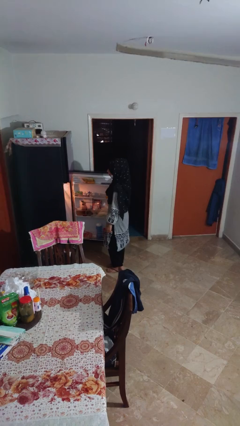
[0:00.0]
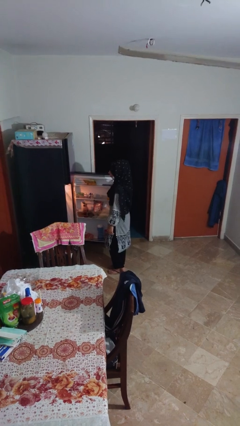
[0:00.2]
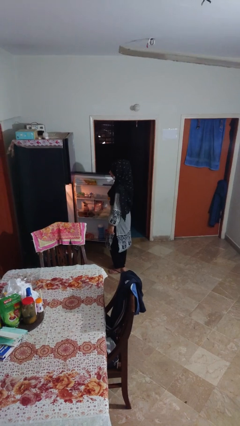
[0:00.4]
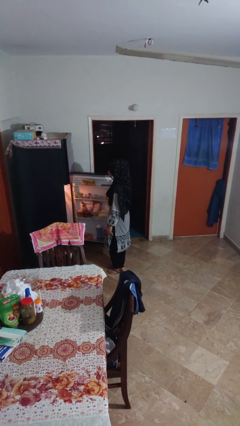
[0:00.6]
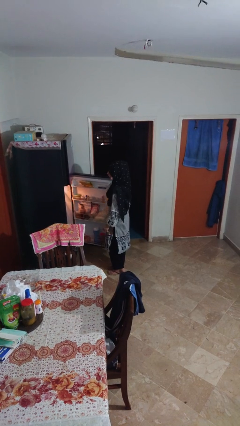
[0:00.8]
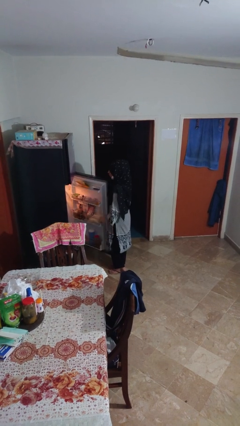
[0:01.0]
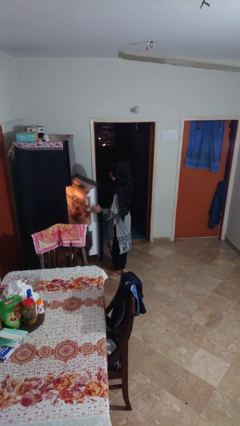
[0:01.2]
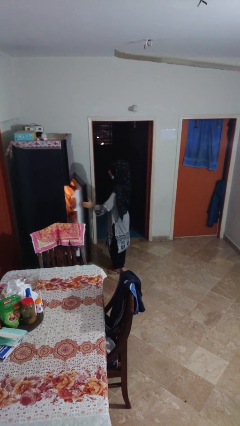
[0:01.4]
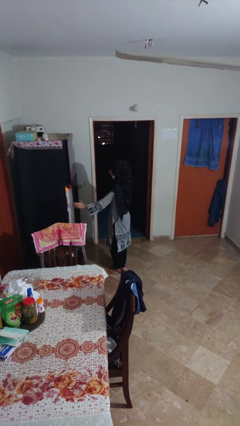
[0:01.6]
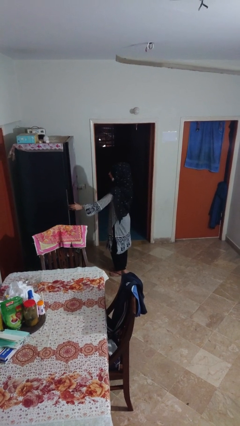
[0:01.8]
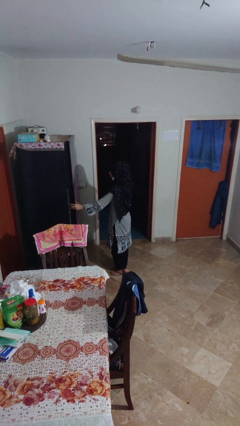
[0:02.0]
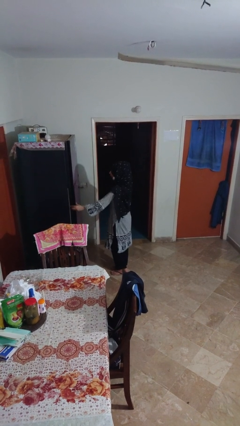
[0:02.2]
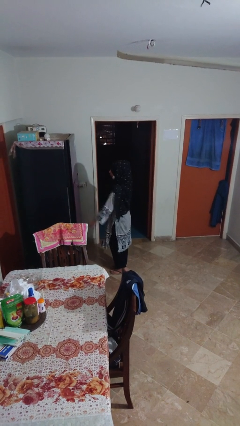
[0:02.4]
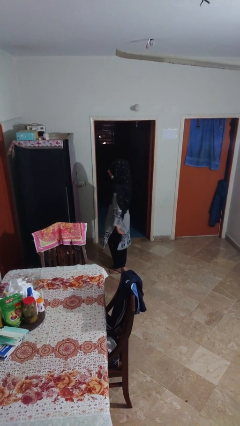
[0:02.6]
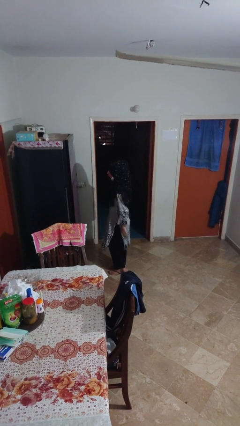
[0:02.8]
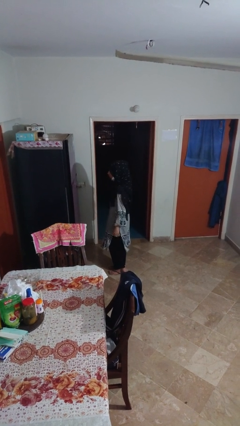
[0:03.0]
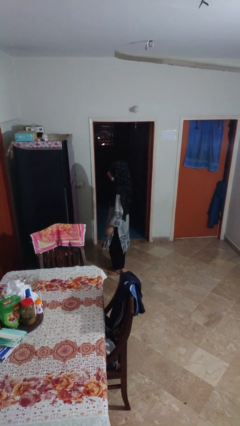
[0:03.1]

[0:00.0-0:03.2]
person closes refrigerator

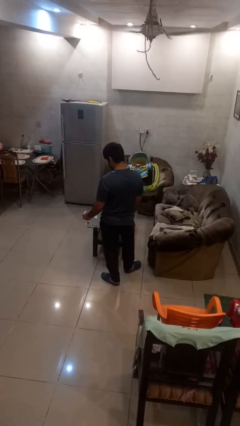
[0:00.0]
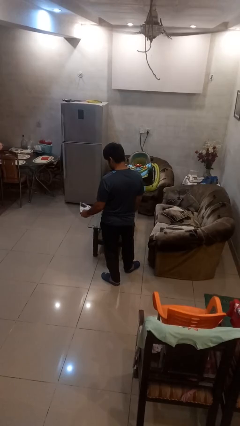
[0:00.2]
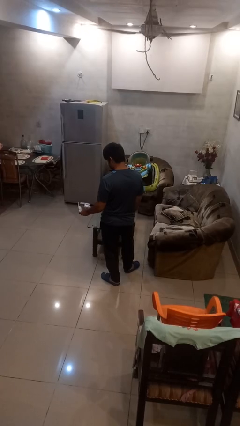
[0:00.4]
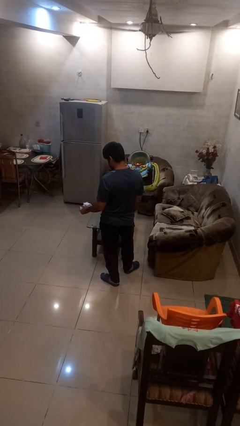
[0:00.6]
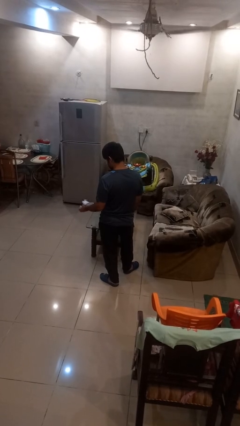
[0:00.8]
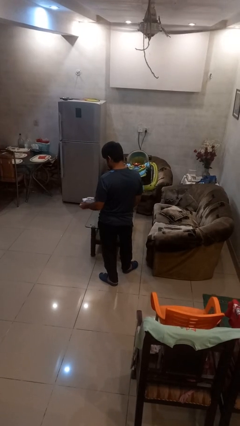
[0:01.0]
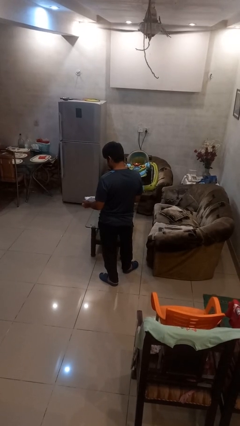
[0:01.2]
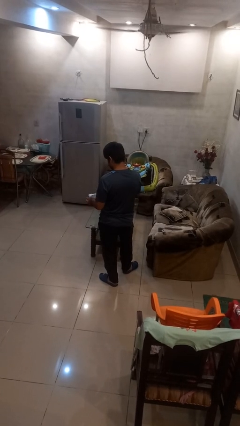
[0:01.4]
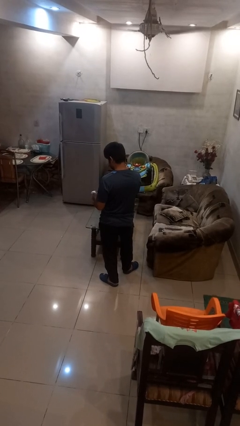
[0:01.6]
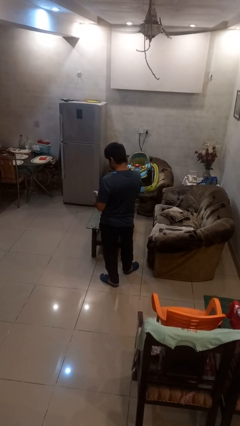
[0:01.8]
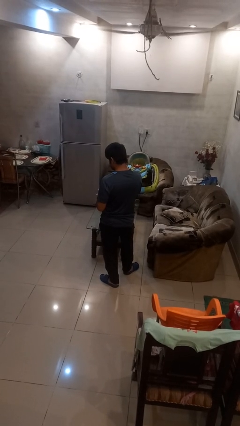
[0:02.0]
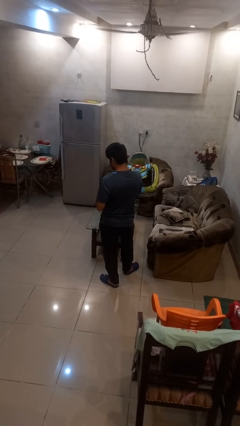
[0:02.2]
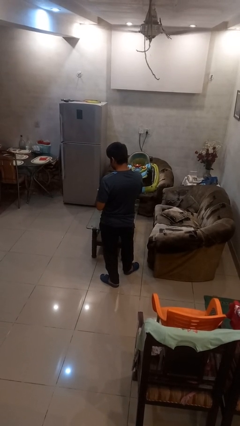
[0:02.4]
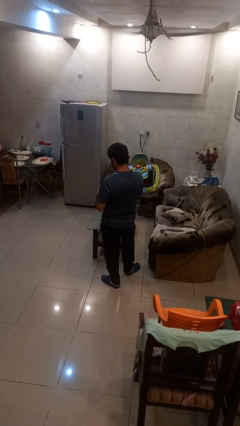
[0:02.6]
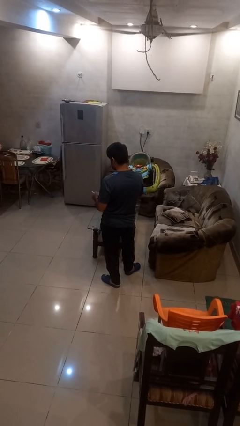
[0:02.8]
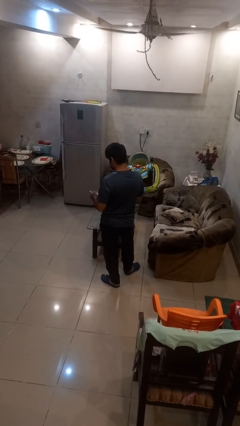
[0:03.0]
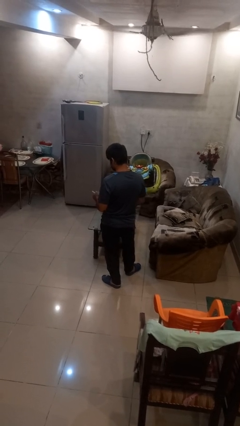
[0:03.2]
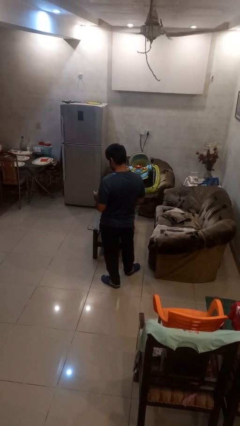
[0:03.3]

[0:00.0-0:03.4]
person crumples paper

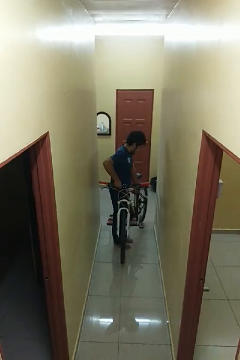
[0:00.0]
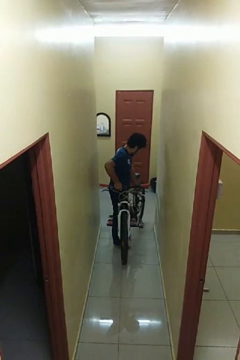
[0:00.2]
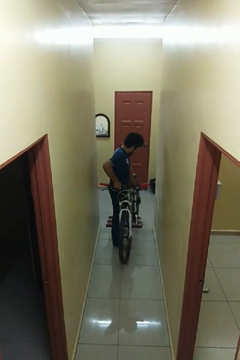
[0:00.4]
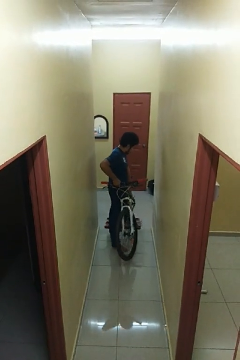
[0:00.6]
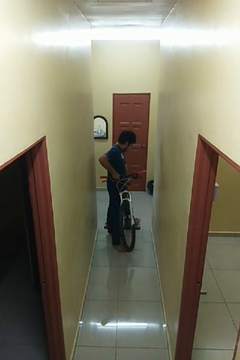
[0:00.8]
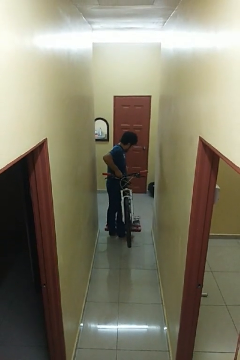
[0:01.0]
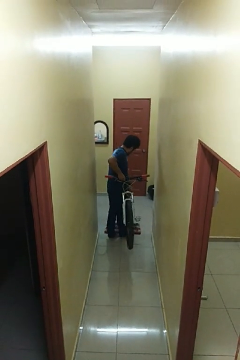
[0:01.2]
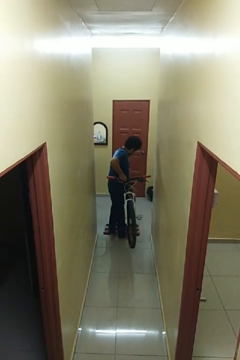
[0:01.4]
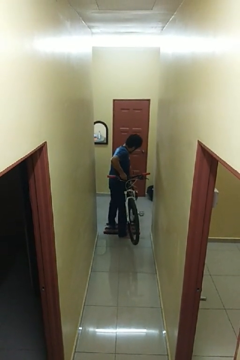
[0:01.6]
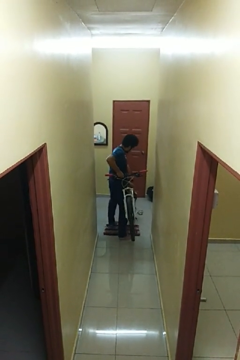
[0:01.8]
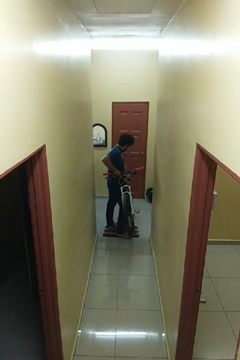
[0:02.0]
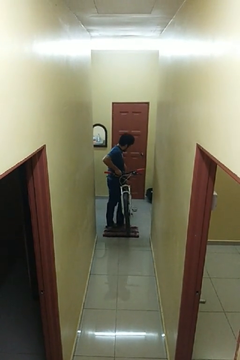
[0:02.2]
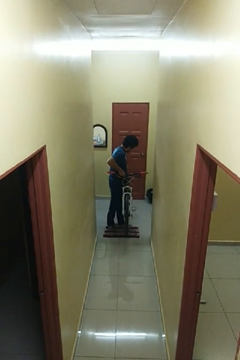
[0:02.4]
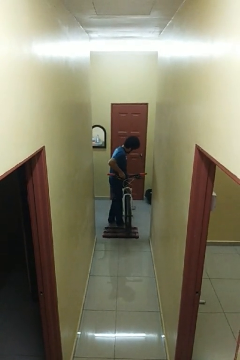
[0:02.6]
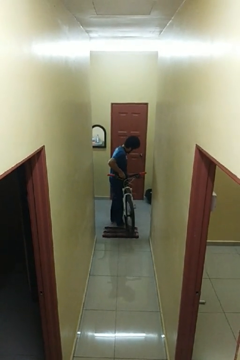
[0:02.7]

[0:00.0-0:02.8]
person carries bicycle

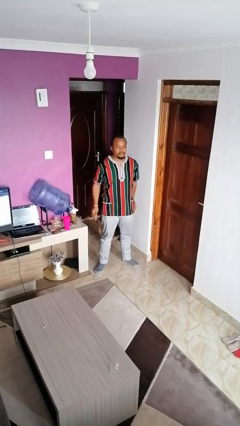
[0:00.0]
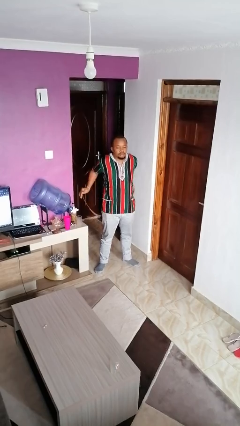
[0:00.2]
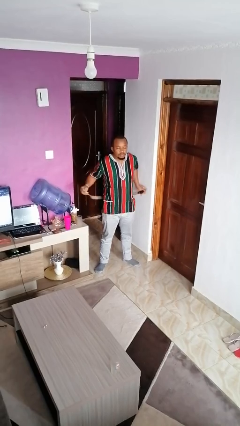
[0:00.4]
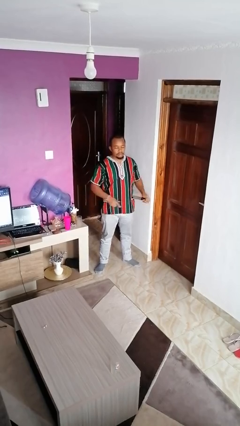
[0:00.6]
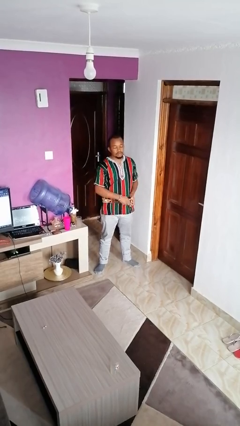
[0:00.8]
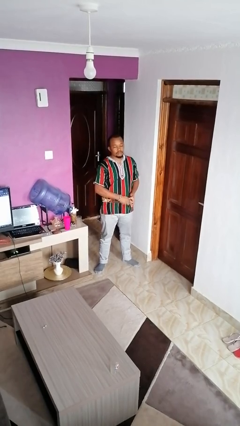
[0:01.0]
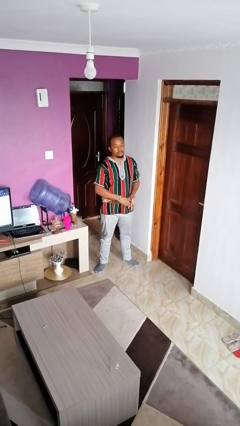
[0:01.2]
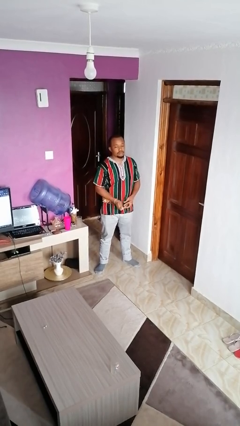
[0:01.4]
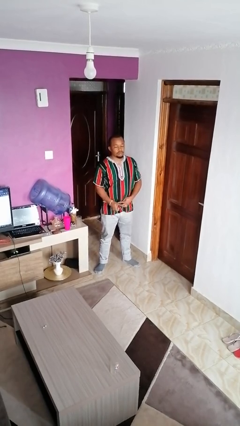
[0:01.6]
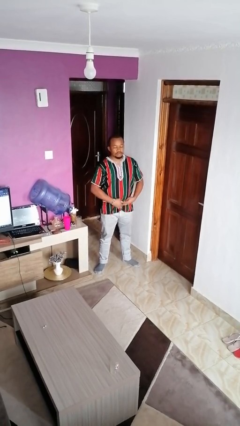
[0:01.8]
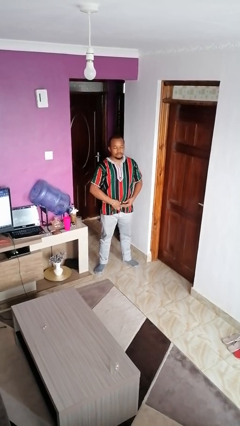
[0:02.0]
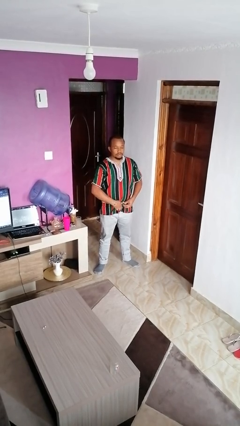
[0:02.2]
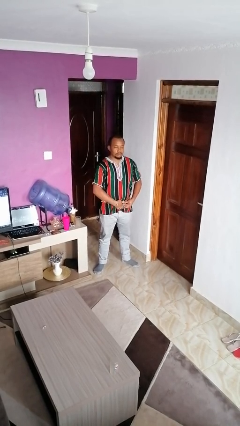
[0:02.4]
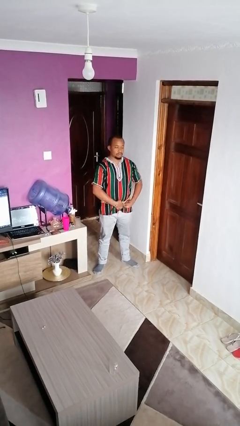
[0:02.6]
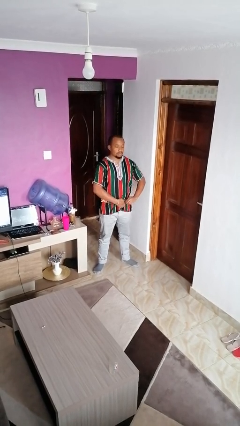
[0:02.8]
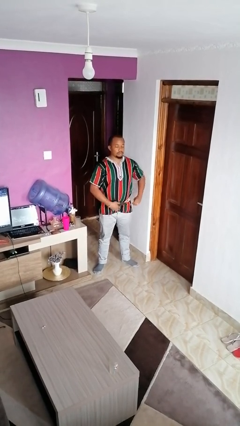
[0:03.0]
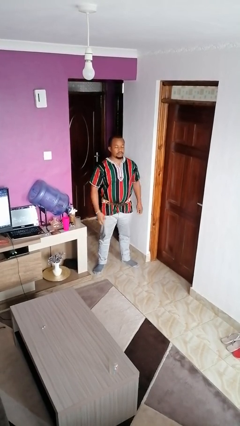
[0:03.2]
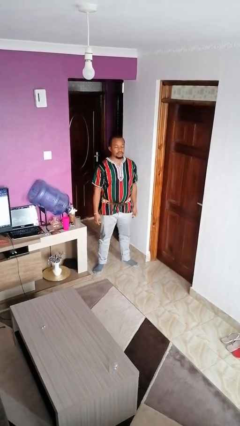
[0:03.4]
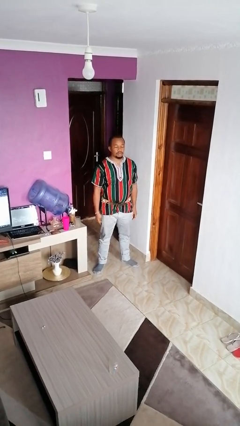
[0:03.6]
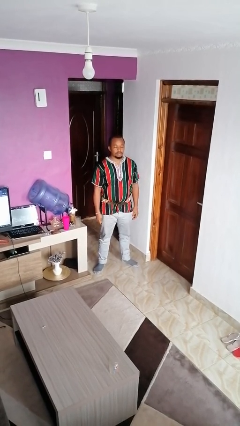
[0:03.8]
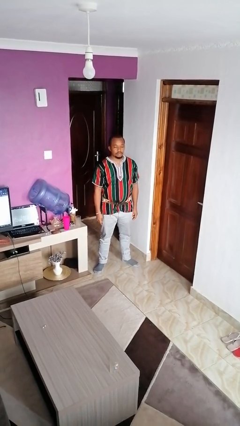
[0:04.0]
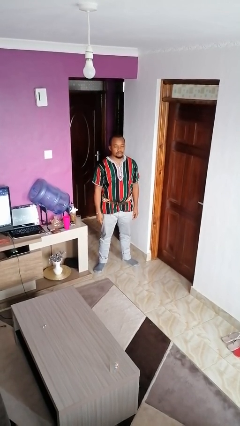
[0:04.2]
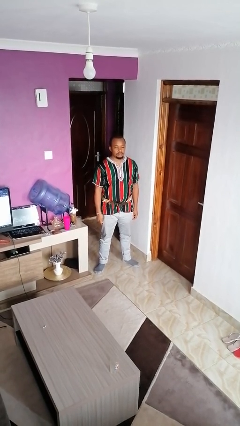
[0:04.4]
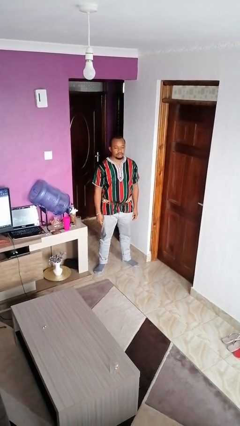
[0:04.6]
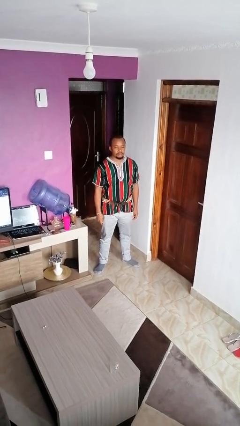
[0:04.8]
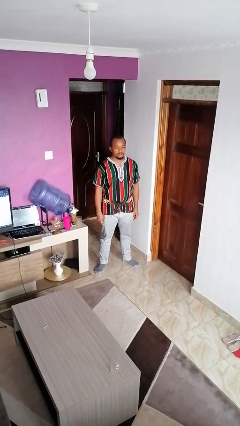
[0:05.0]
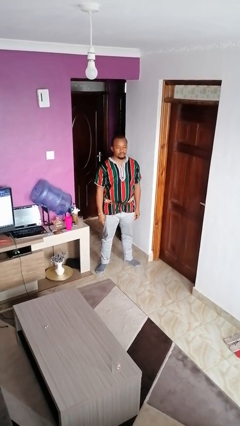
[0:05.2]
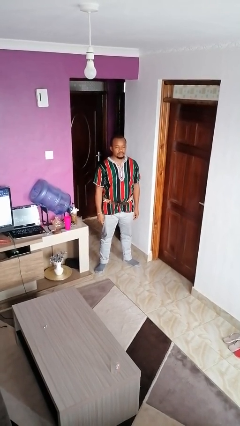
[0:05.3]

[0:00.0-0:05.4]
person puts on belt

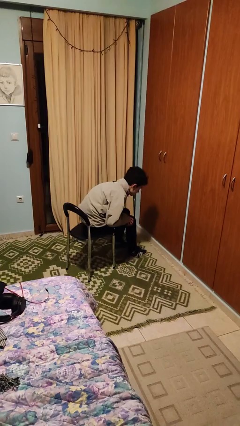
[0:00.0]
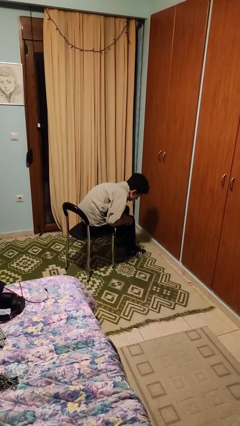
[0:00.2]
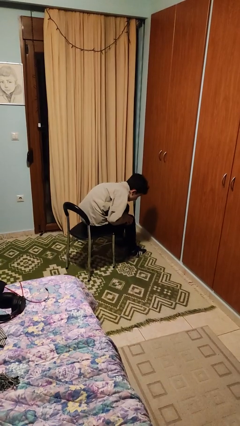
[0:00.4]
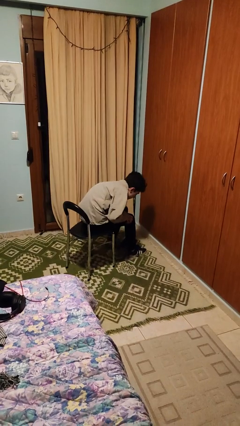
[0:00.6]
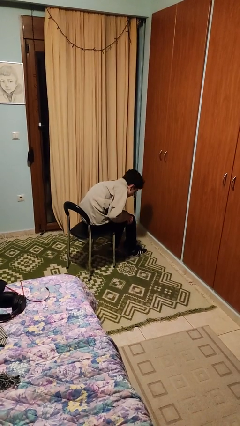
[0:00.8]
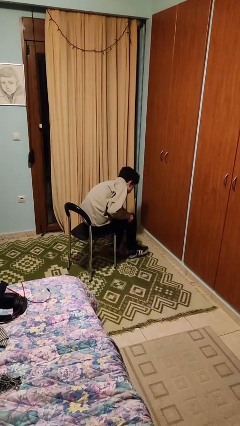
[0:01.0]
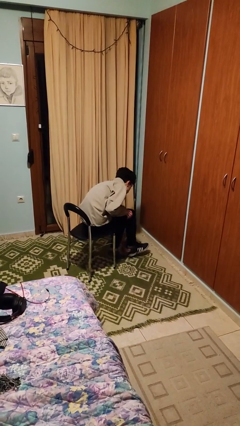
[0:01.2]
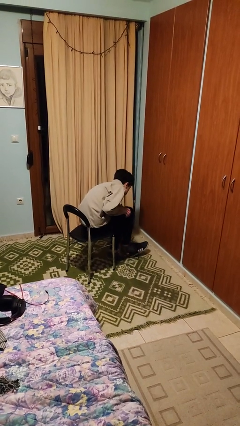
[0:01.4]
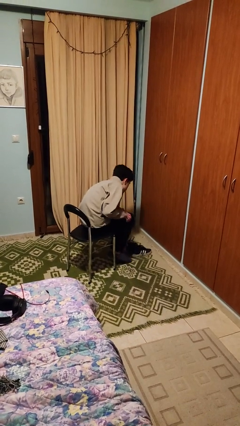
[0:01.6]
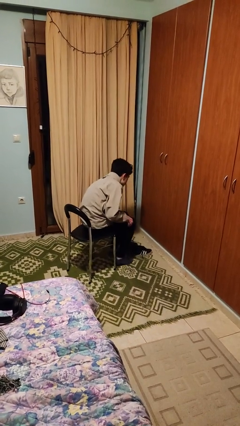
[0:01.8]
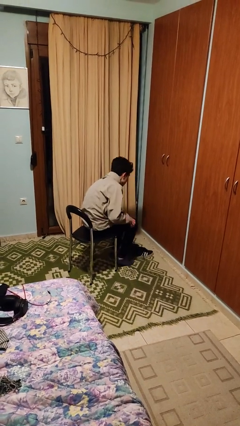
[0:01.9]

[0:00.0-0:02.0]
person takes off shoes

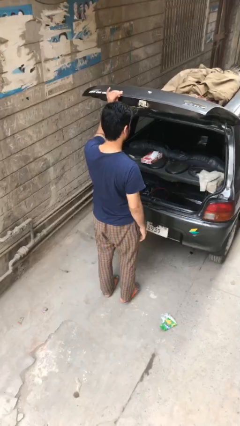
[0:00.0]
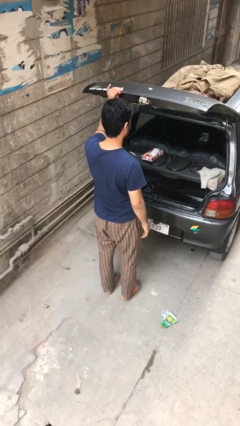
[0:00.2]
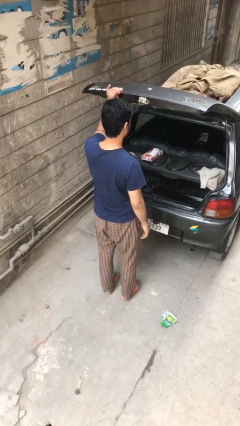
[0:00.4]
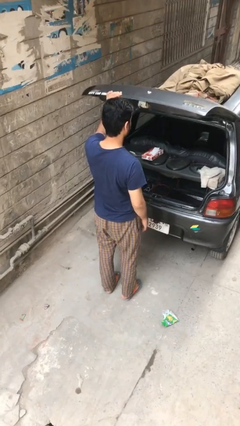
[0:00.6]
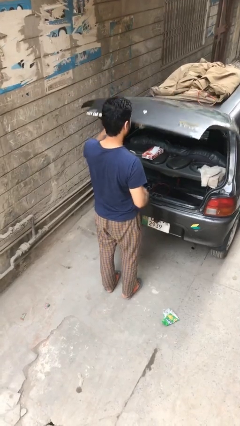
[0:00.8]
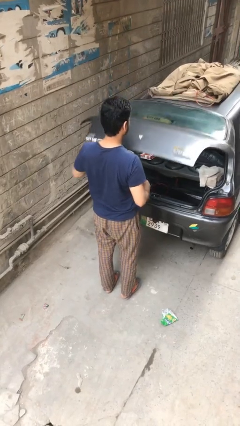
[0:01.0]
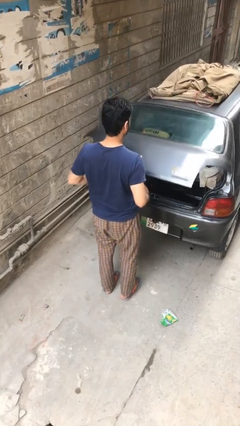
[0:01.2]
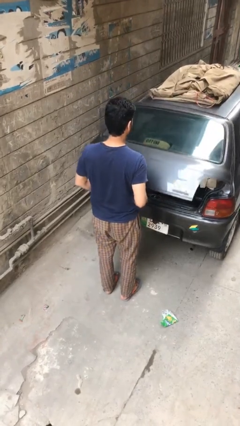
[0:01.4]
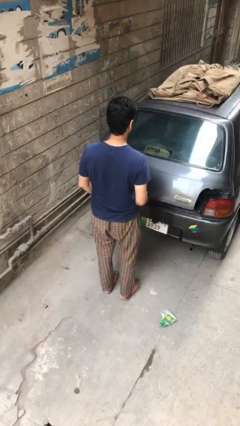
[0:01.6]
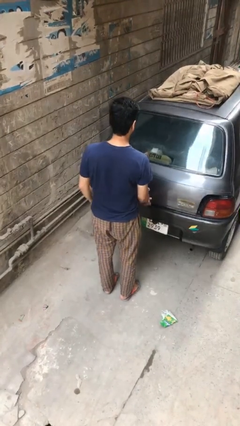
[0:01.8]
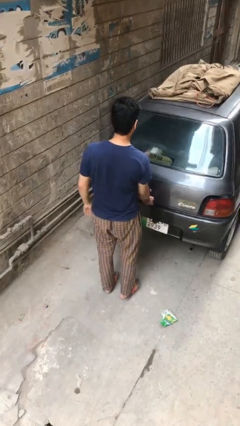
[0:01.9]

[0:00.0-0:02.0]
person closes car trunk
